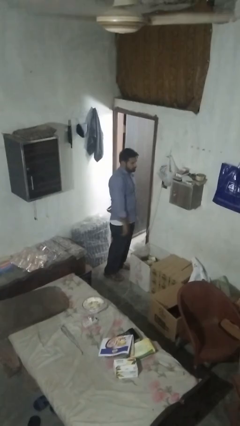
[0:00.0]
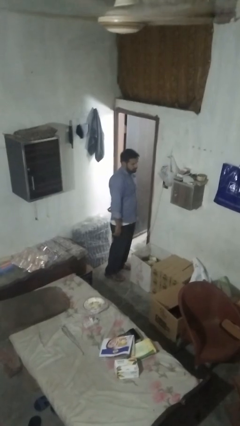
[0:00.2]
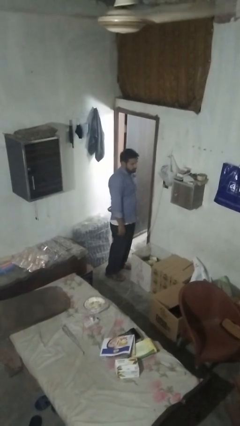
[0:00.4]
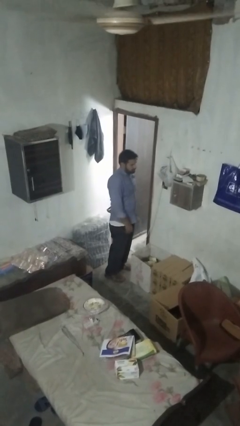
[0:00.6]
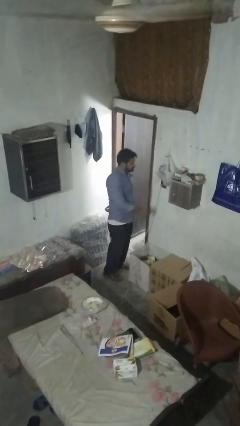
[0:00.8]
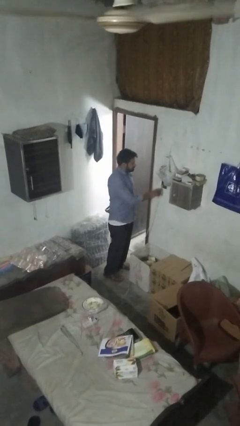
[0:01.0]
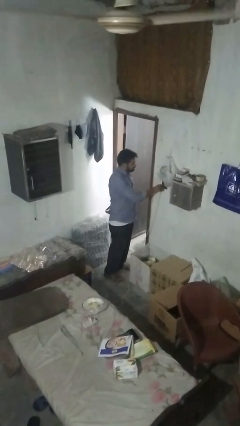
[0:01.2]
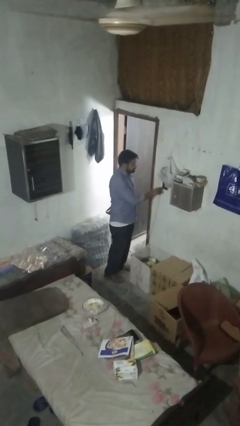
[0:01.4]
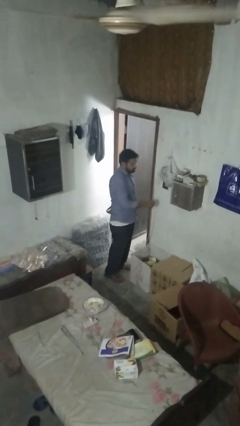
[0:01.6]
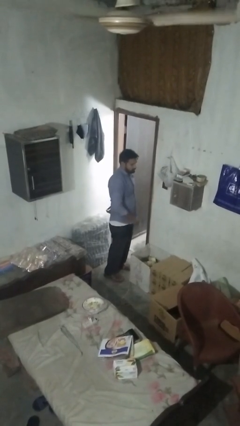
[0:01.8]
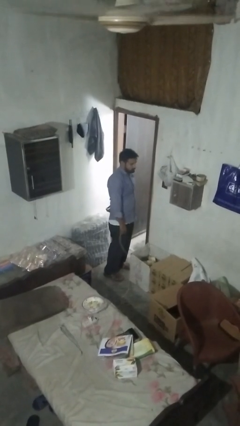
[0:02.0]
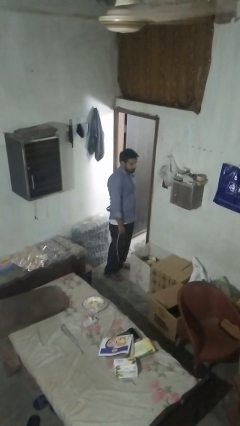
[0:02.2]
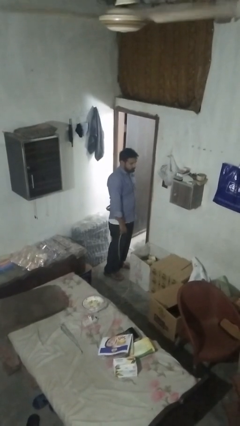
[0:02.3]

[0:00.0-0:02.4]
person unplugs from electrical socket

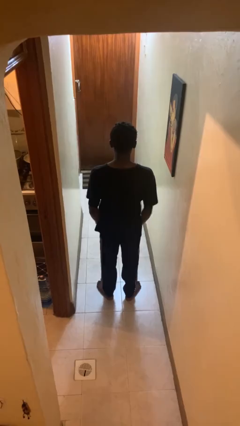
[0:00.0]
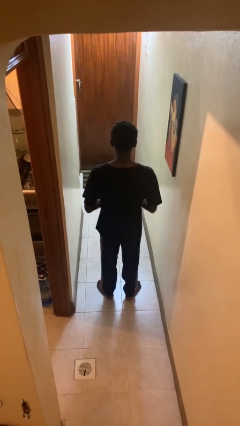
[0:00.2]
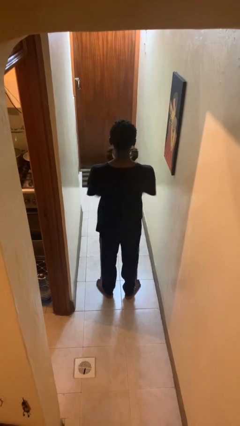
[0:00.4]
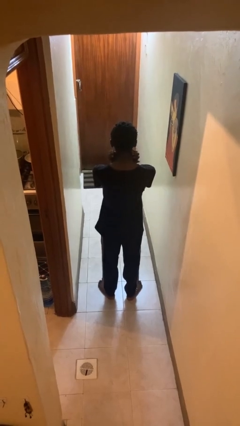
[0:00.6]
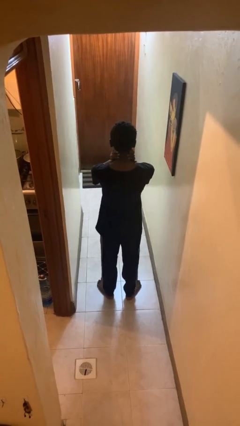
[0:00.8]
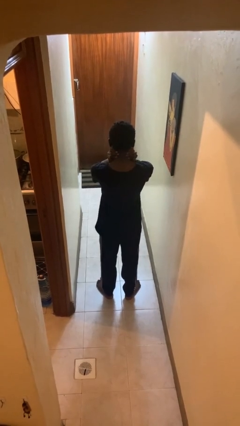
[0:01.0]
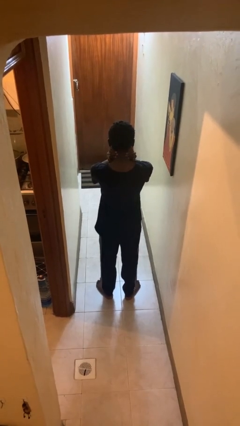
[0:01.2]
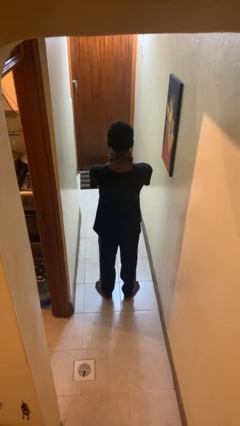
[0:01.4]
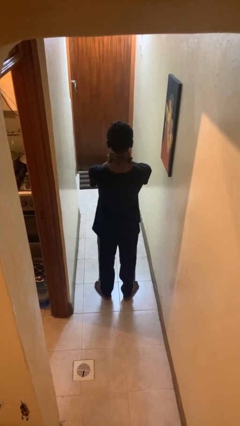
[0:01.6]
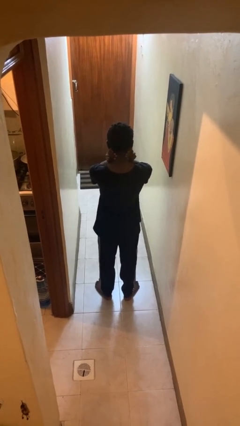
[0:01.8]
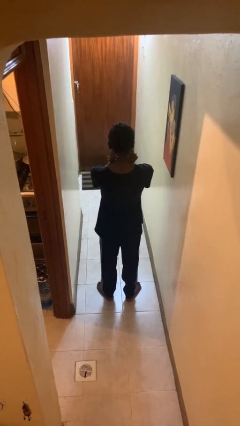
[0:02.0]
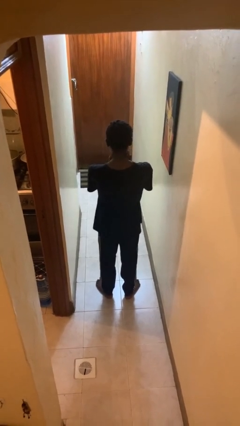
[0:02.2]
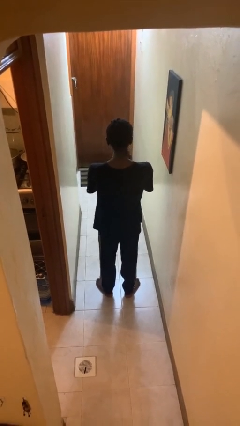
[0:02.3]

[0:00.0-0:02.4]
person rubs neck

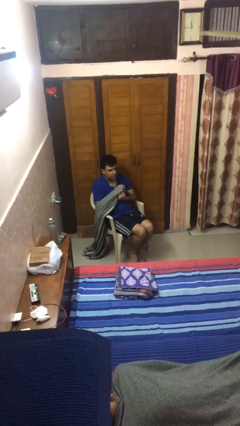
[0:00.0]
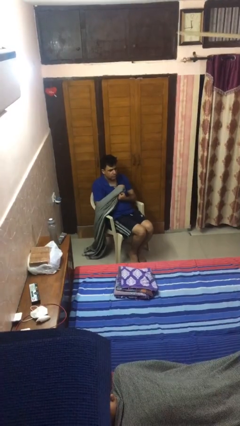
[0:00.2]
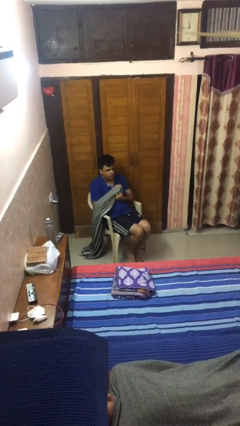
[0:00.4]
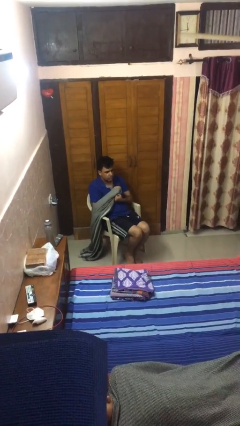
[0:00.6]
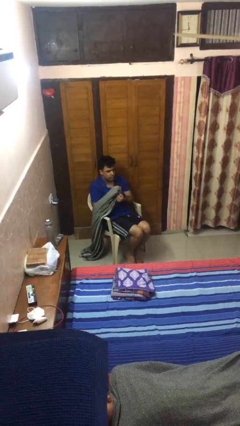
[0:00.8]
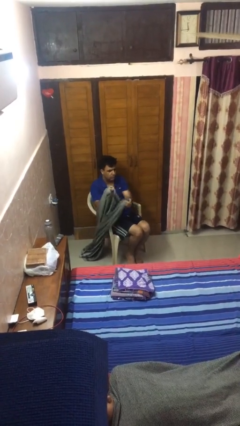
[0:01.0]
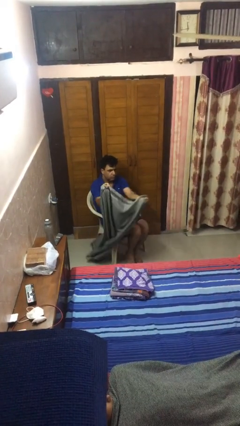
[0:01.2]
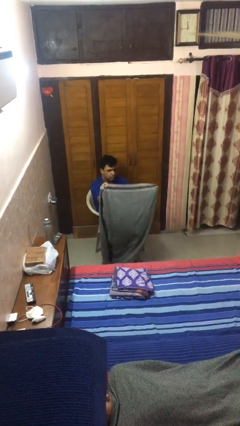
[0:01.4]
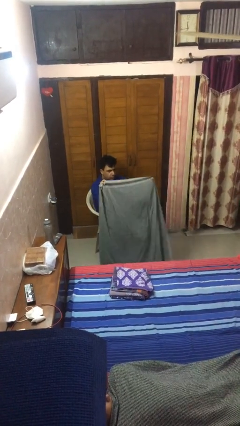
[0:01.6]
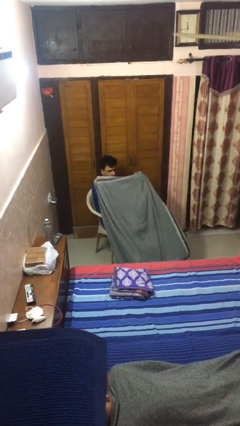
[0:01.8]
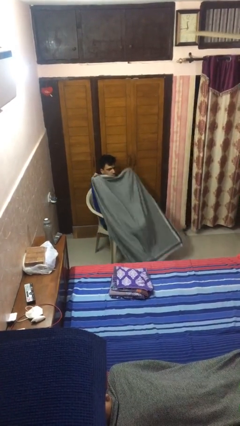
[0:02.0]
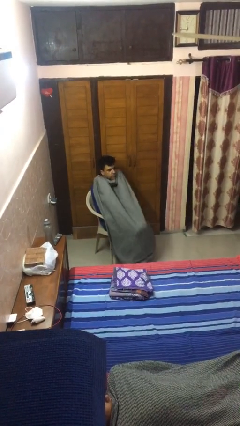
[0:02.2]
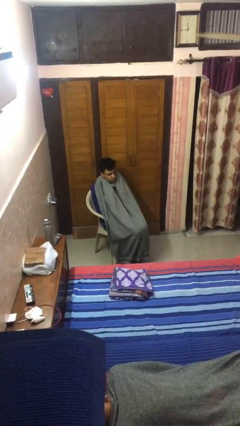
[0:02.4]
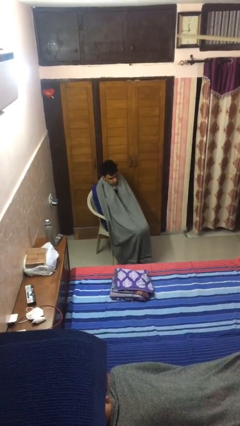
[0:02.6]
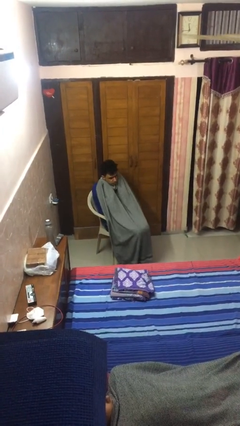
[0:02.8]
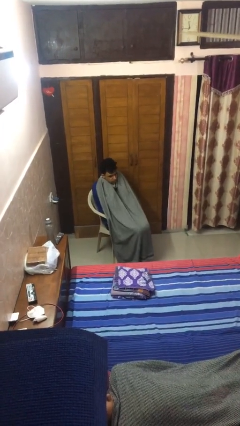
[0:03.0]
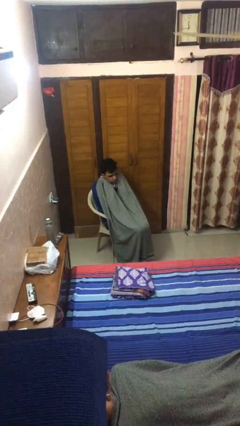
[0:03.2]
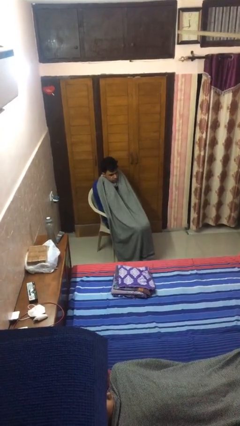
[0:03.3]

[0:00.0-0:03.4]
person covers with blanket

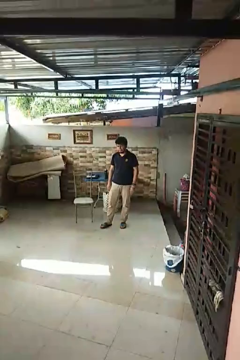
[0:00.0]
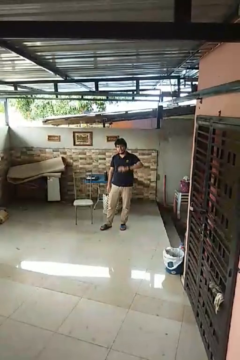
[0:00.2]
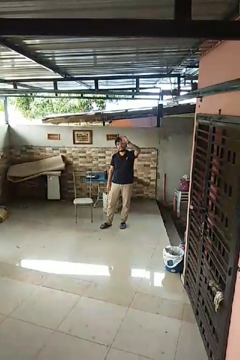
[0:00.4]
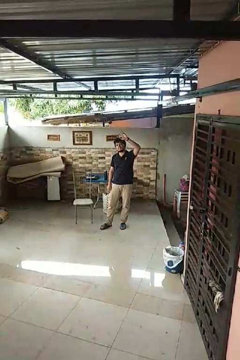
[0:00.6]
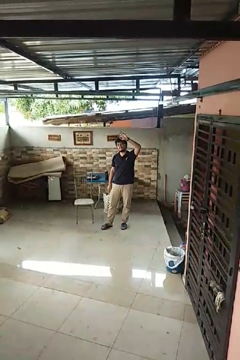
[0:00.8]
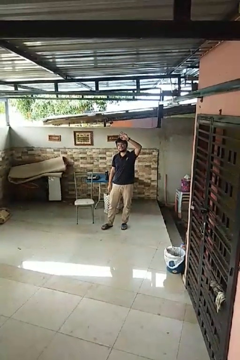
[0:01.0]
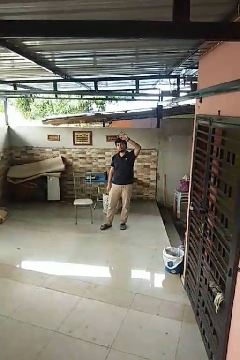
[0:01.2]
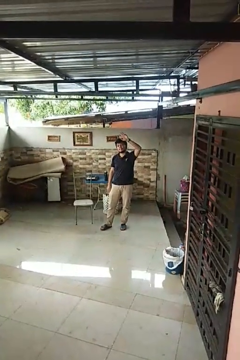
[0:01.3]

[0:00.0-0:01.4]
person gestures swipe up

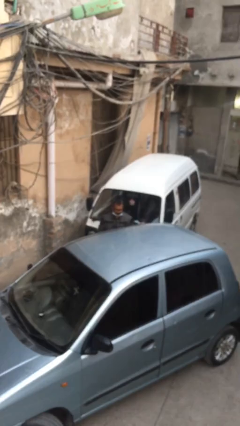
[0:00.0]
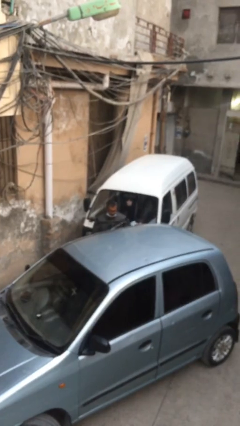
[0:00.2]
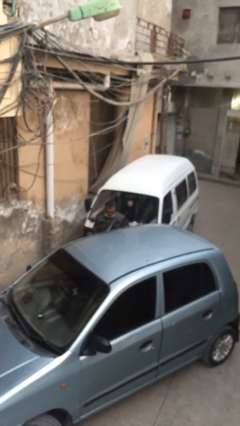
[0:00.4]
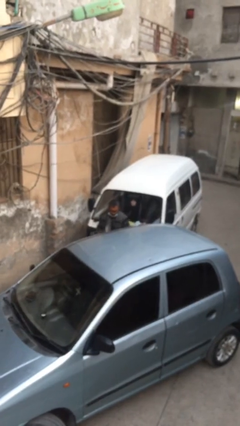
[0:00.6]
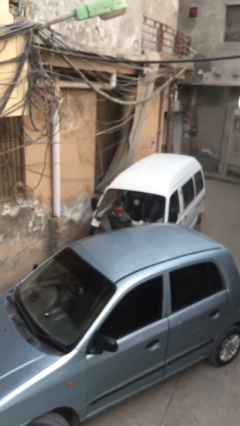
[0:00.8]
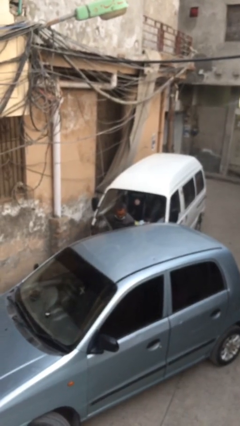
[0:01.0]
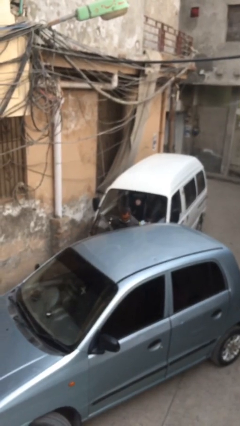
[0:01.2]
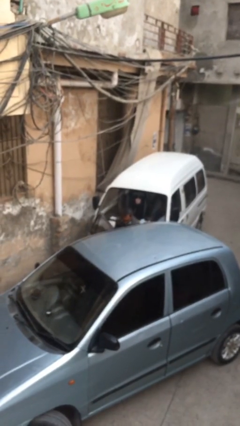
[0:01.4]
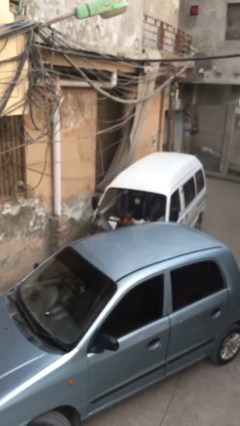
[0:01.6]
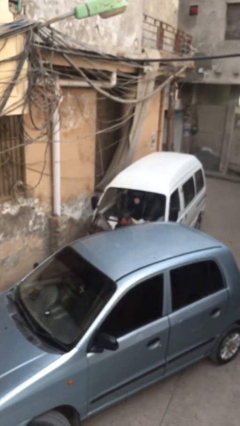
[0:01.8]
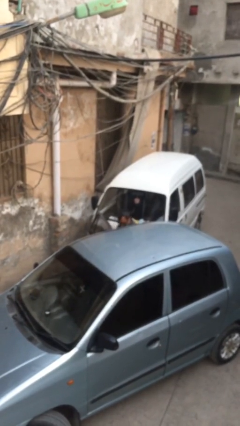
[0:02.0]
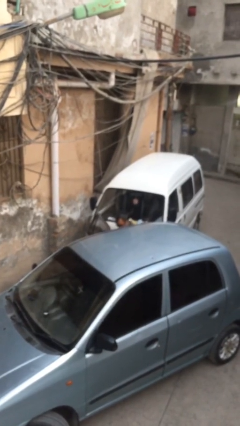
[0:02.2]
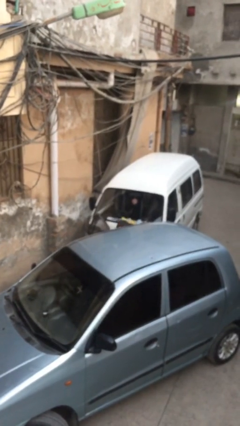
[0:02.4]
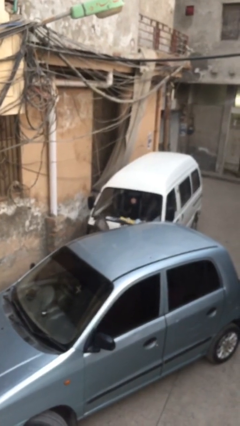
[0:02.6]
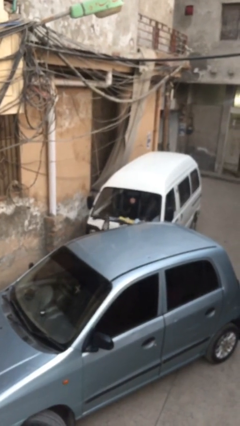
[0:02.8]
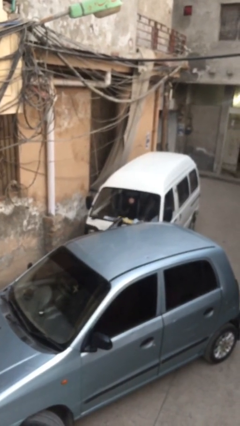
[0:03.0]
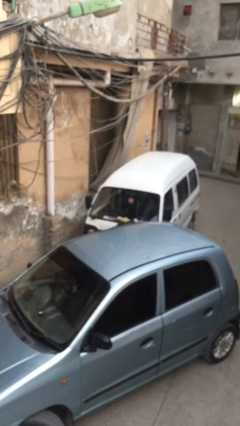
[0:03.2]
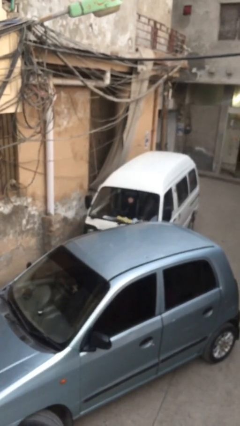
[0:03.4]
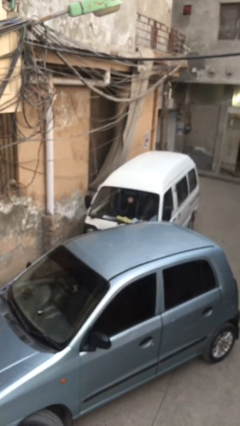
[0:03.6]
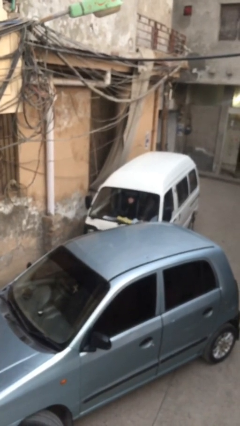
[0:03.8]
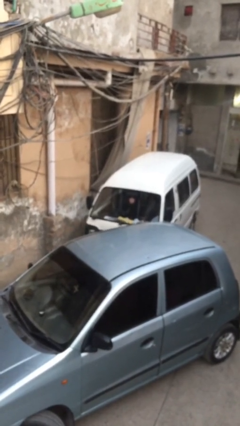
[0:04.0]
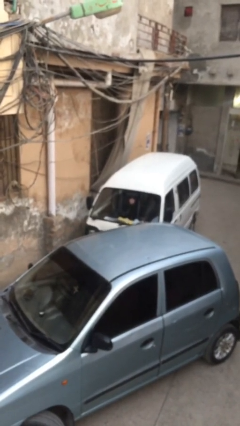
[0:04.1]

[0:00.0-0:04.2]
car picks up person

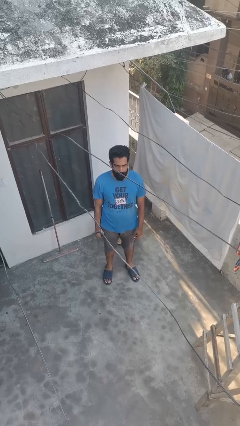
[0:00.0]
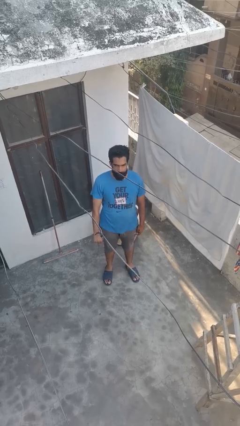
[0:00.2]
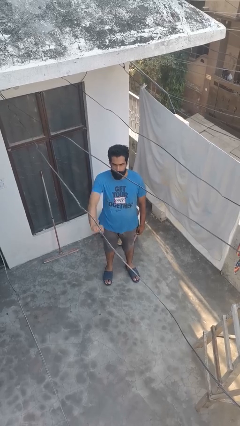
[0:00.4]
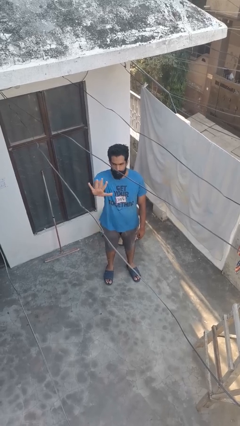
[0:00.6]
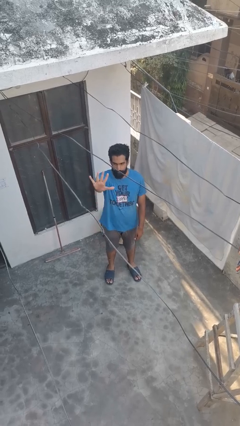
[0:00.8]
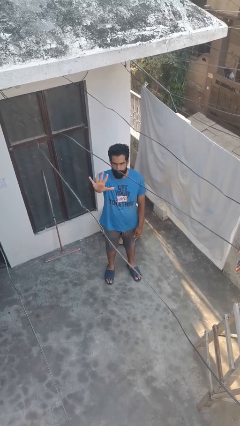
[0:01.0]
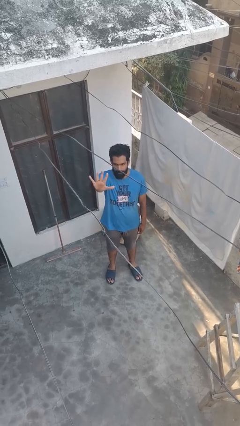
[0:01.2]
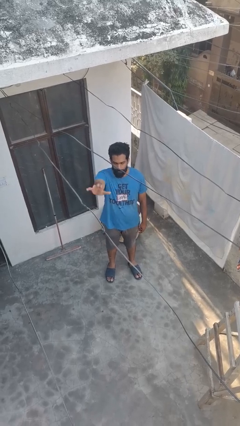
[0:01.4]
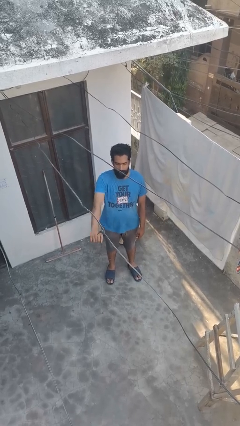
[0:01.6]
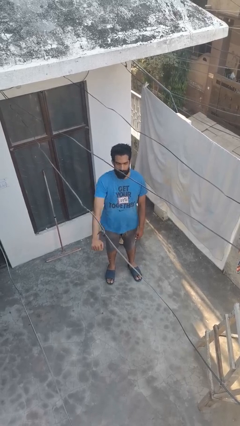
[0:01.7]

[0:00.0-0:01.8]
person gestures number five

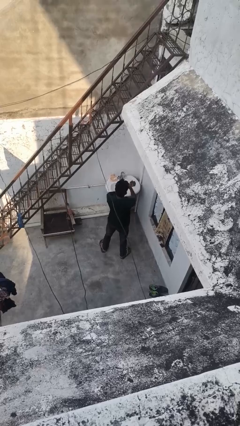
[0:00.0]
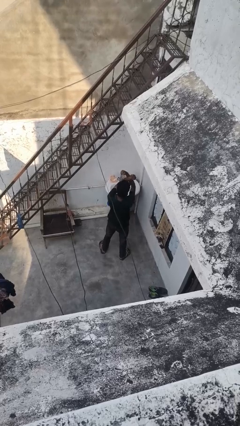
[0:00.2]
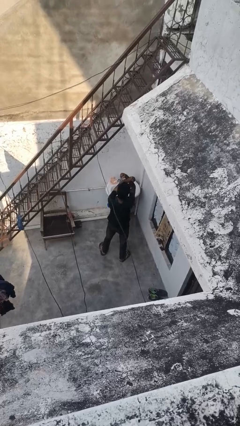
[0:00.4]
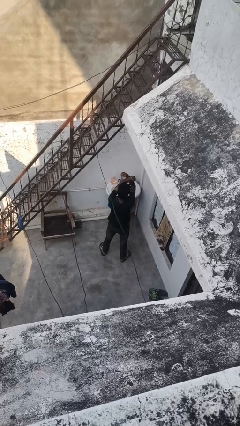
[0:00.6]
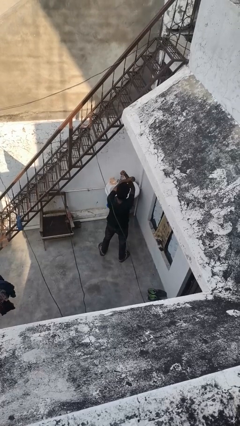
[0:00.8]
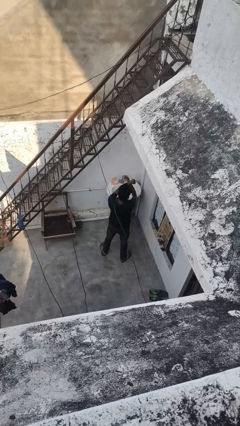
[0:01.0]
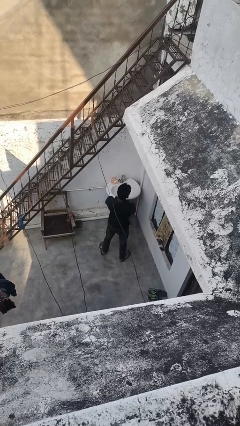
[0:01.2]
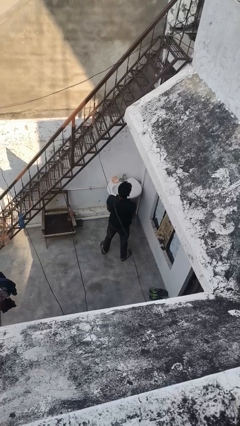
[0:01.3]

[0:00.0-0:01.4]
person gestures arms x
